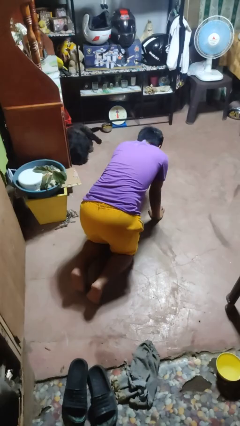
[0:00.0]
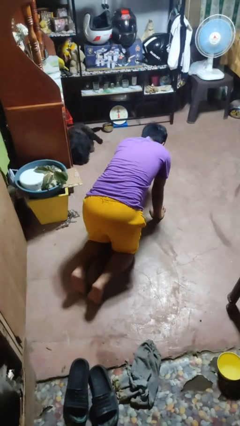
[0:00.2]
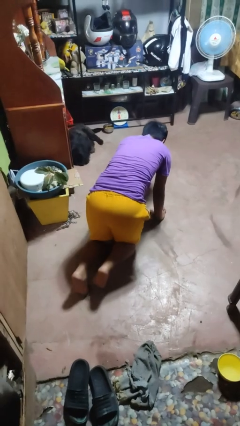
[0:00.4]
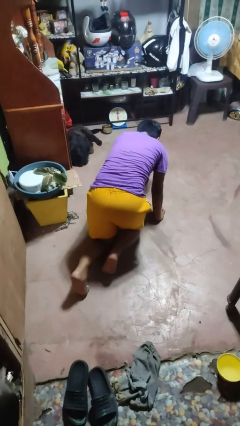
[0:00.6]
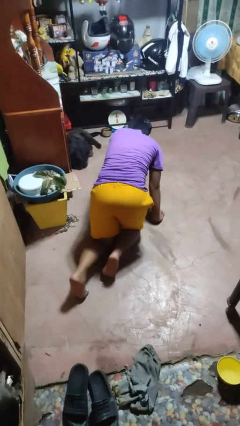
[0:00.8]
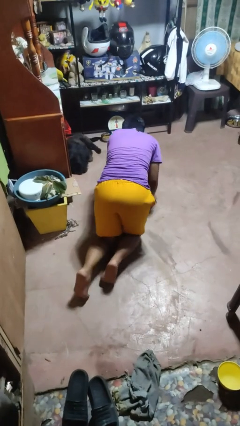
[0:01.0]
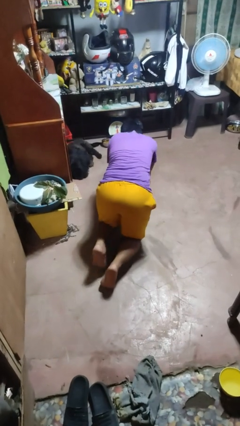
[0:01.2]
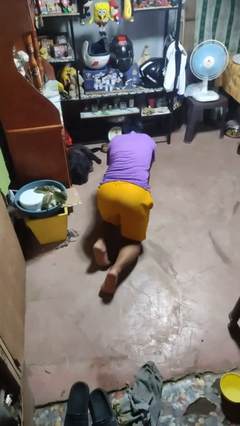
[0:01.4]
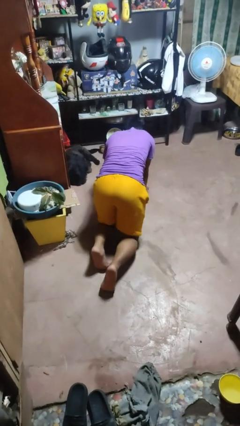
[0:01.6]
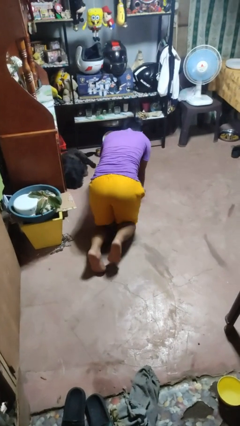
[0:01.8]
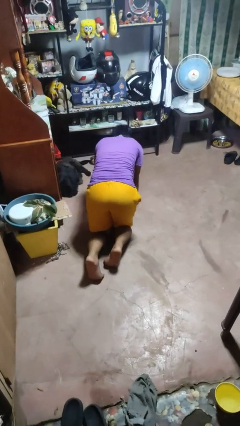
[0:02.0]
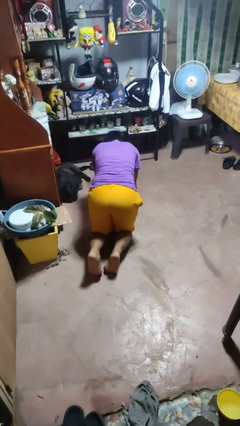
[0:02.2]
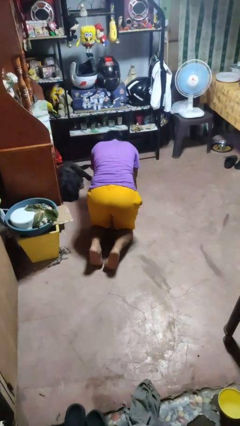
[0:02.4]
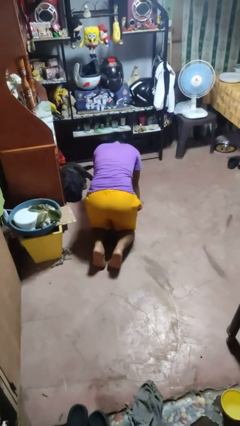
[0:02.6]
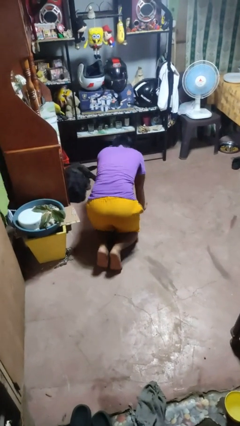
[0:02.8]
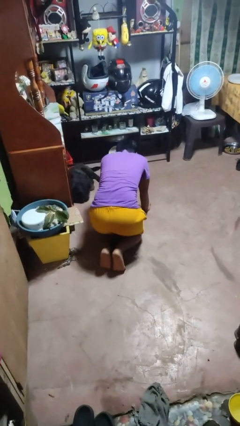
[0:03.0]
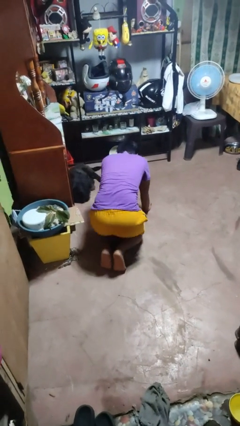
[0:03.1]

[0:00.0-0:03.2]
person crawls

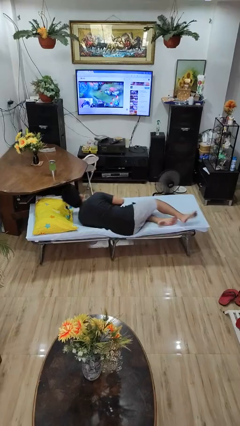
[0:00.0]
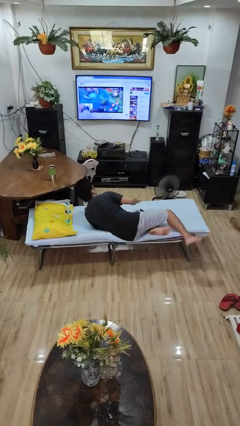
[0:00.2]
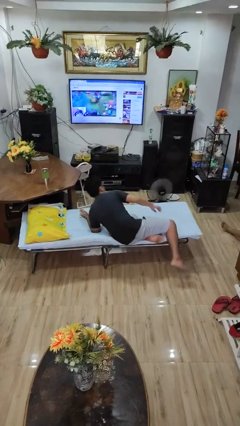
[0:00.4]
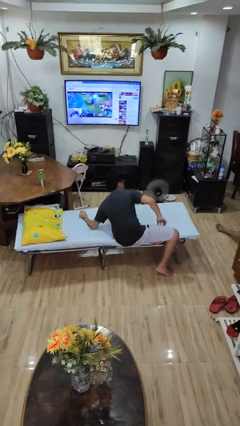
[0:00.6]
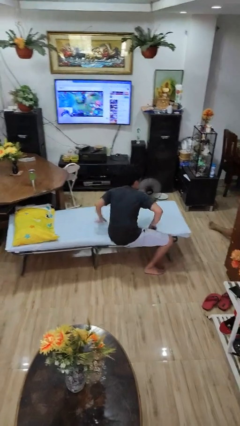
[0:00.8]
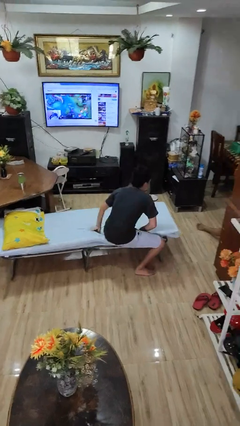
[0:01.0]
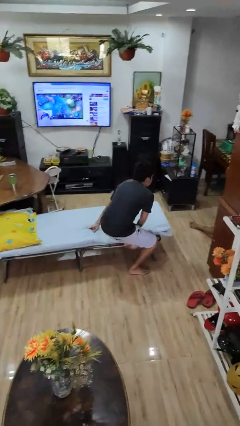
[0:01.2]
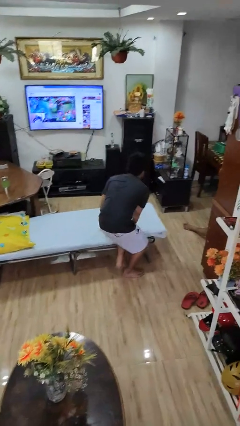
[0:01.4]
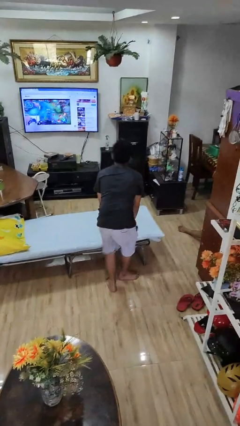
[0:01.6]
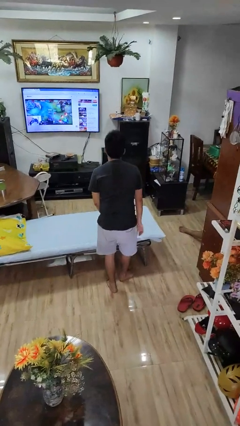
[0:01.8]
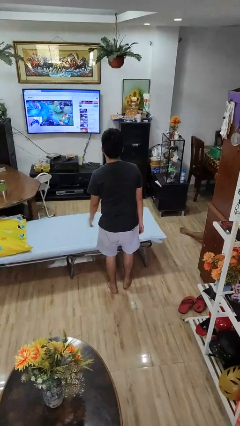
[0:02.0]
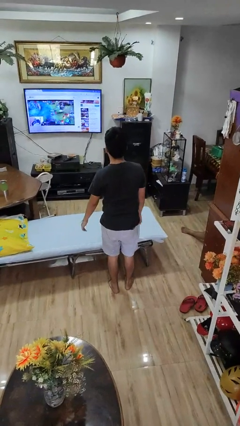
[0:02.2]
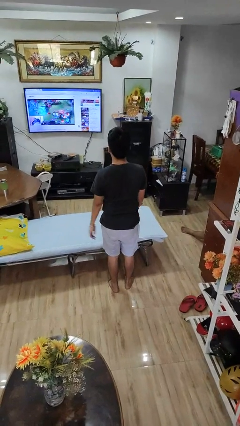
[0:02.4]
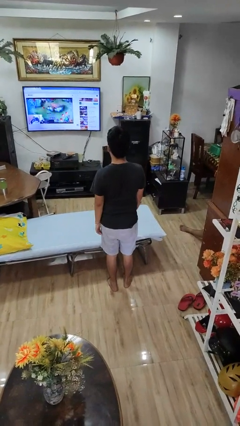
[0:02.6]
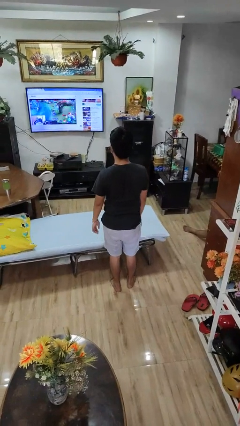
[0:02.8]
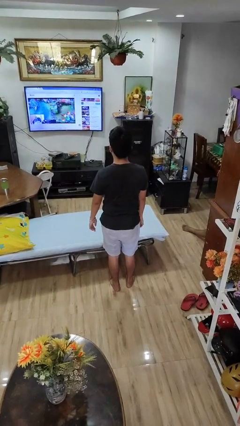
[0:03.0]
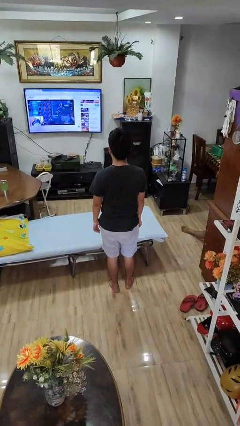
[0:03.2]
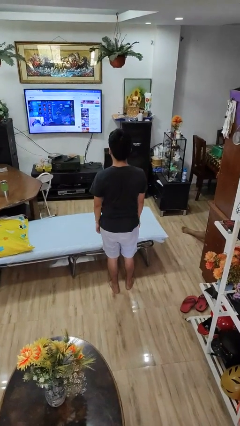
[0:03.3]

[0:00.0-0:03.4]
person stands up

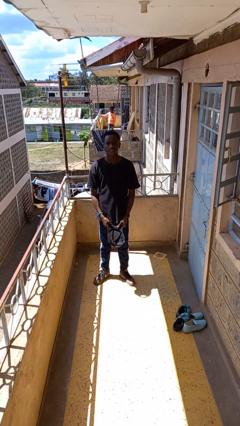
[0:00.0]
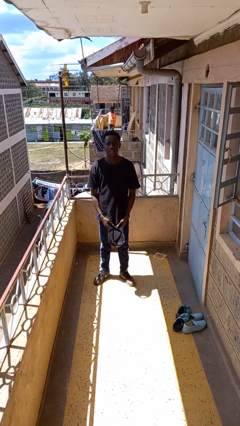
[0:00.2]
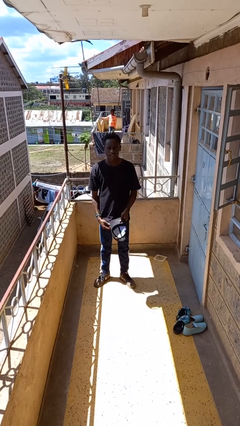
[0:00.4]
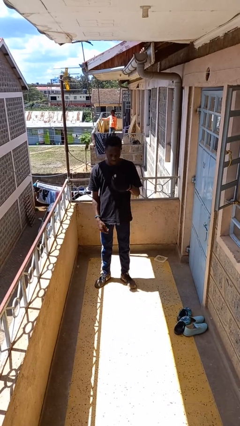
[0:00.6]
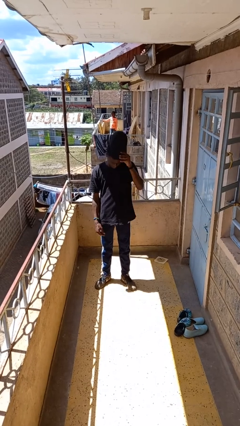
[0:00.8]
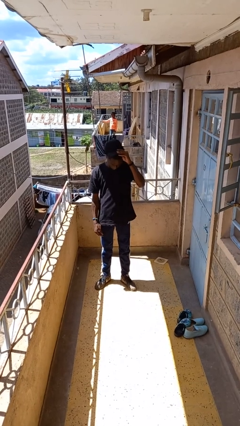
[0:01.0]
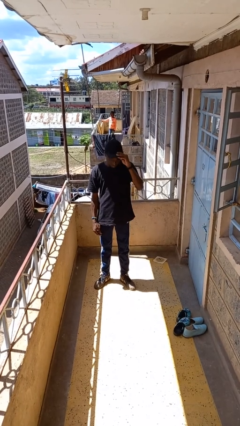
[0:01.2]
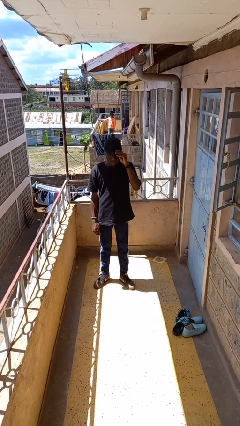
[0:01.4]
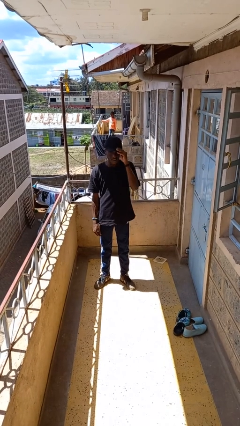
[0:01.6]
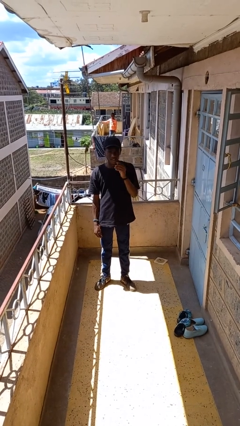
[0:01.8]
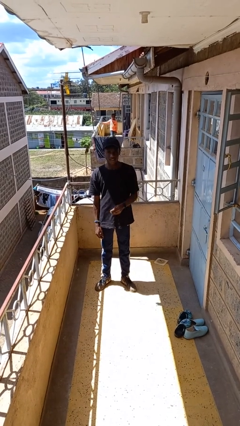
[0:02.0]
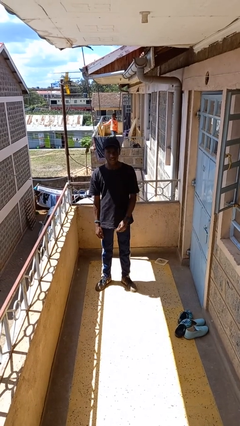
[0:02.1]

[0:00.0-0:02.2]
person puts on hat

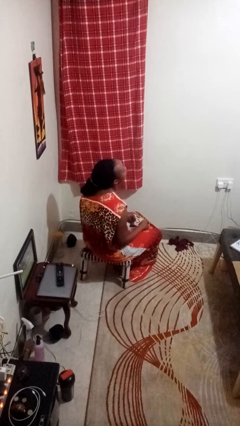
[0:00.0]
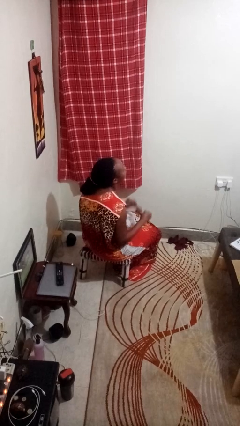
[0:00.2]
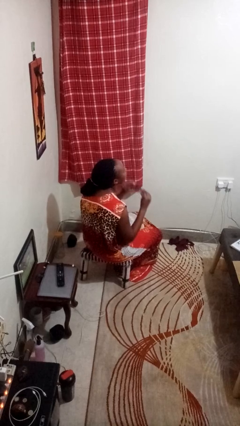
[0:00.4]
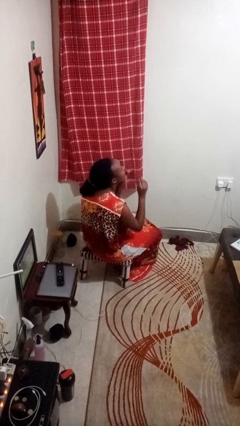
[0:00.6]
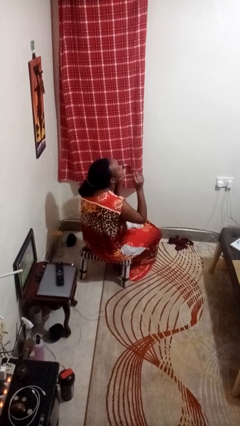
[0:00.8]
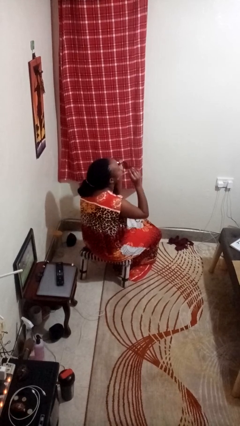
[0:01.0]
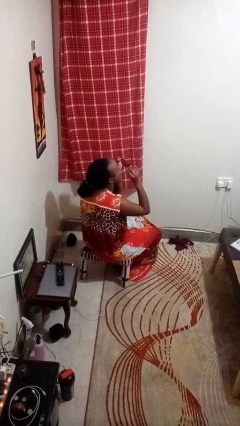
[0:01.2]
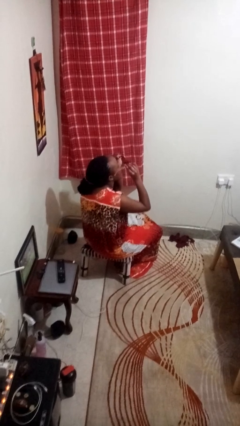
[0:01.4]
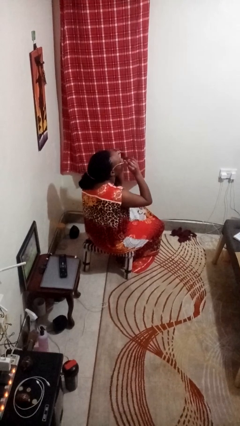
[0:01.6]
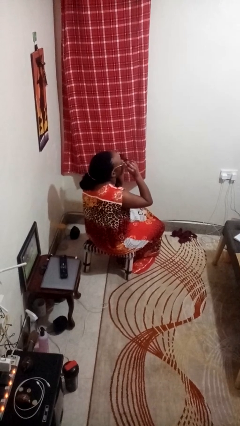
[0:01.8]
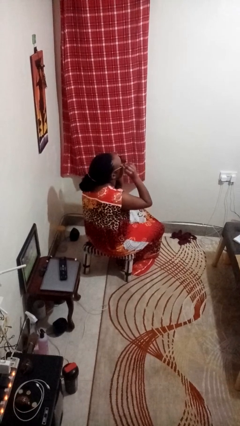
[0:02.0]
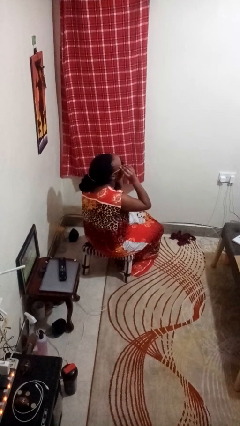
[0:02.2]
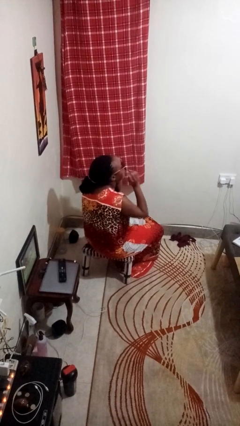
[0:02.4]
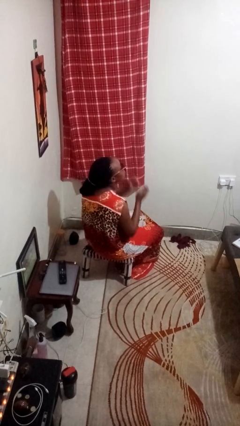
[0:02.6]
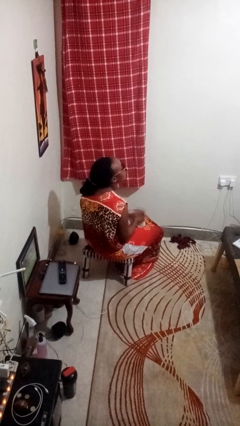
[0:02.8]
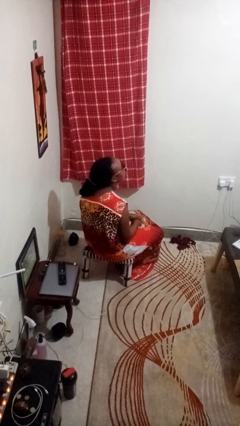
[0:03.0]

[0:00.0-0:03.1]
person puts on sunglasses

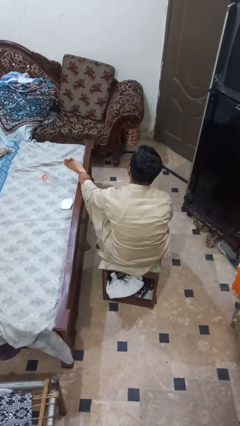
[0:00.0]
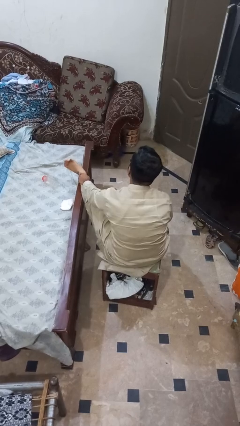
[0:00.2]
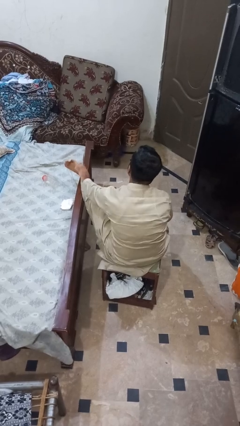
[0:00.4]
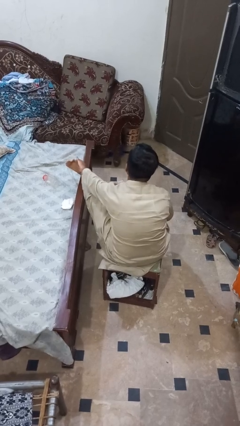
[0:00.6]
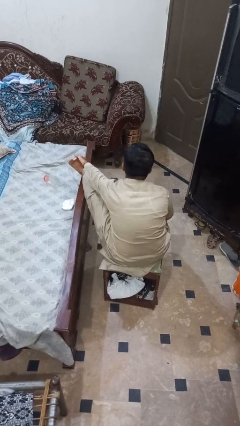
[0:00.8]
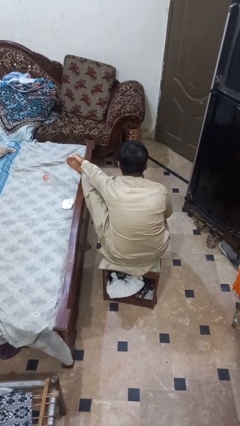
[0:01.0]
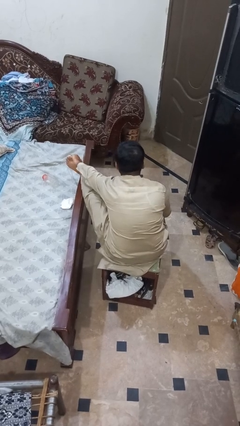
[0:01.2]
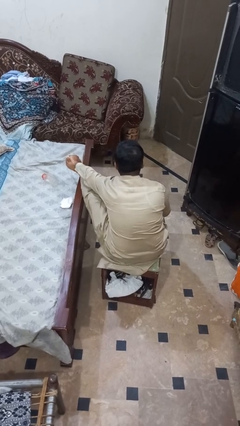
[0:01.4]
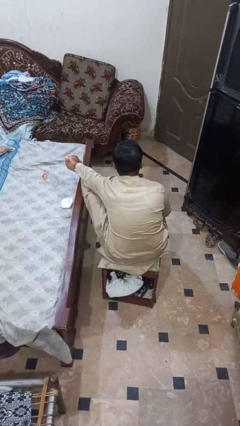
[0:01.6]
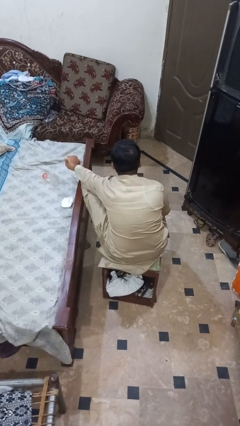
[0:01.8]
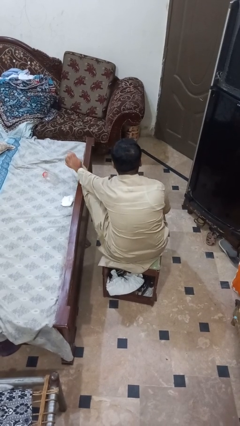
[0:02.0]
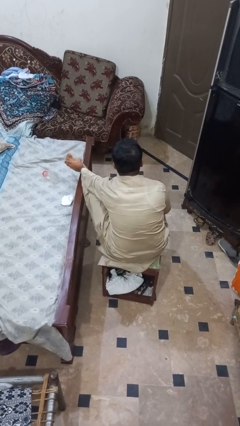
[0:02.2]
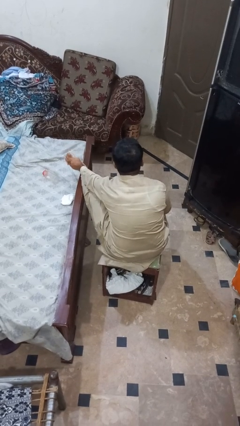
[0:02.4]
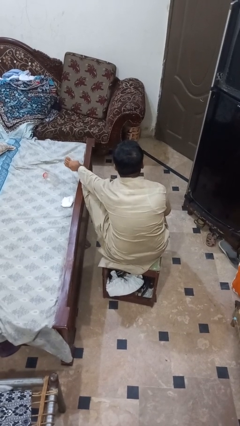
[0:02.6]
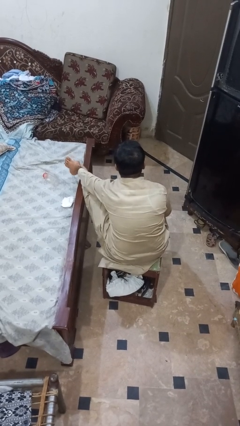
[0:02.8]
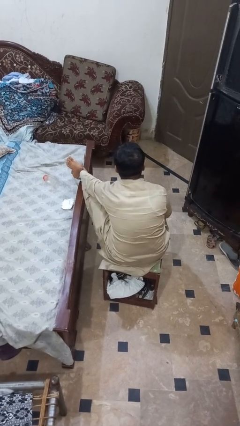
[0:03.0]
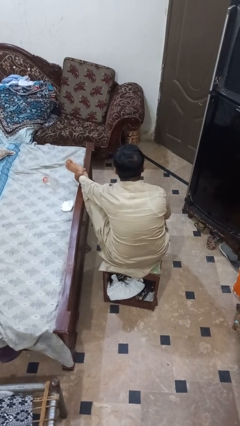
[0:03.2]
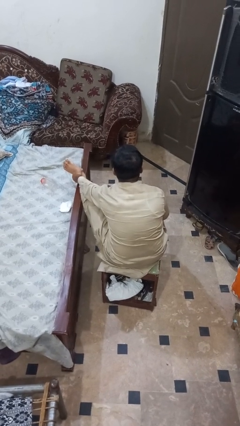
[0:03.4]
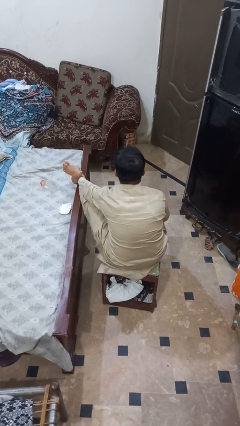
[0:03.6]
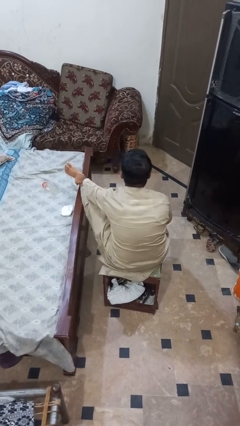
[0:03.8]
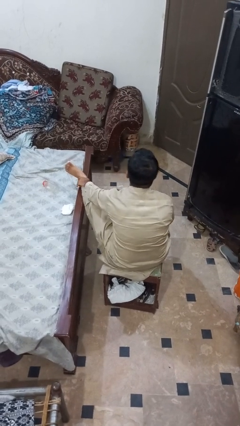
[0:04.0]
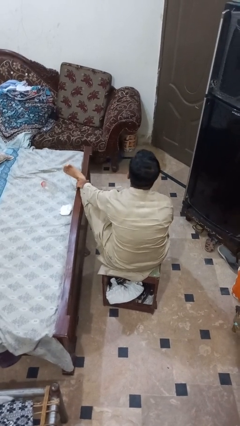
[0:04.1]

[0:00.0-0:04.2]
person rubs foot

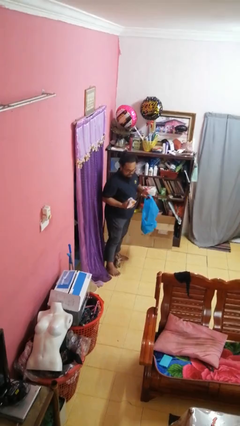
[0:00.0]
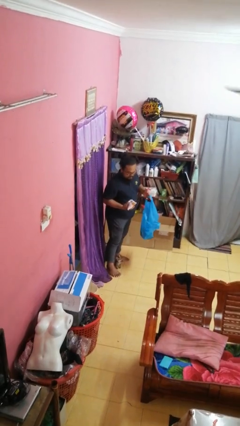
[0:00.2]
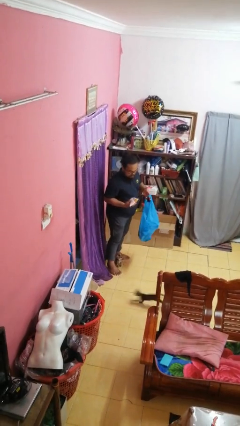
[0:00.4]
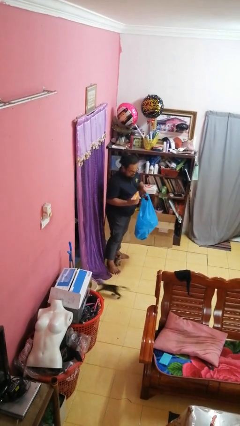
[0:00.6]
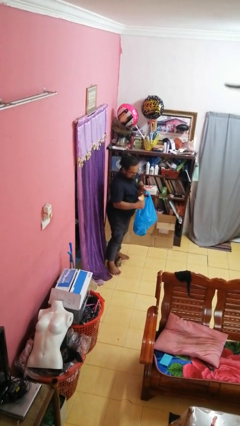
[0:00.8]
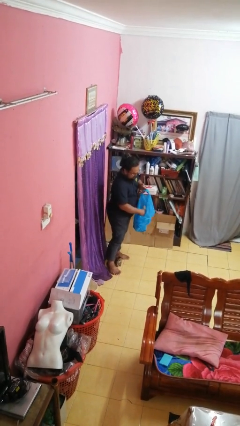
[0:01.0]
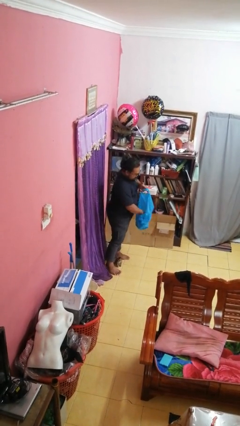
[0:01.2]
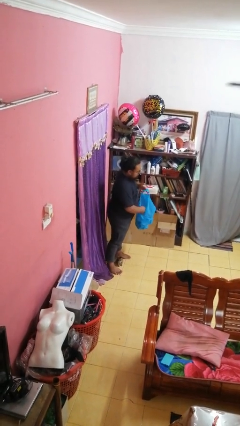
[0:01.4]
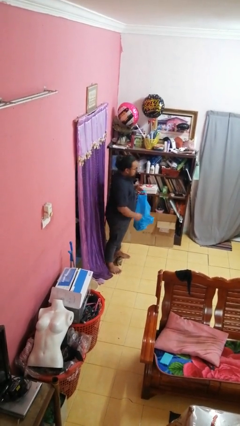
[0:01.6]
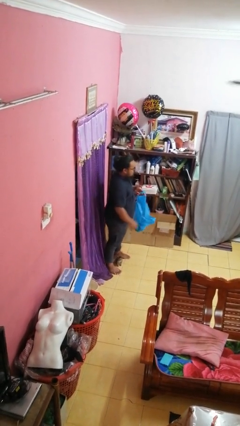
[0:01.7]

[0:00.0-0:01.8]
person puts object into bag
